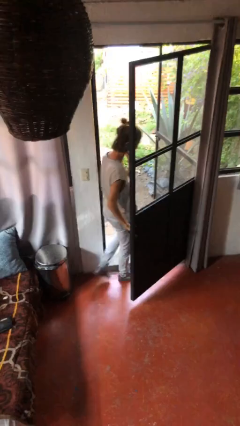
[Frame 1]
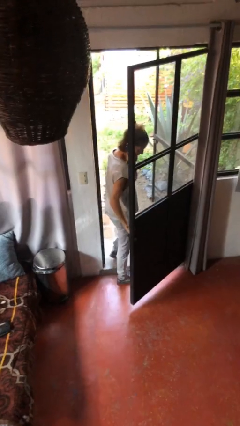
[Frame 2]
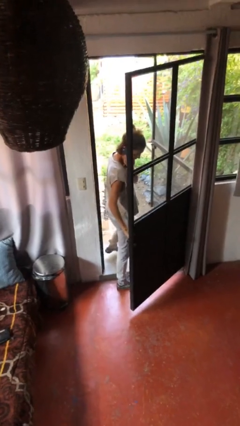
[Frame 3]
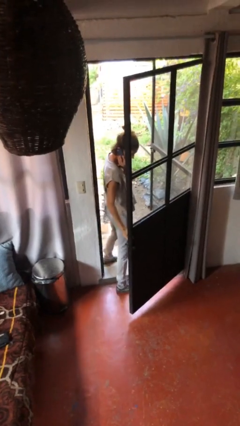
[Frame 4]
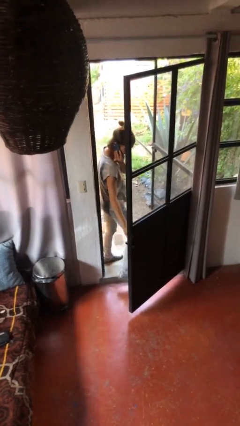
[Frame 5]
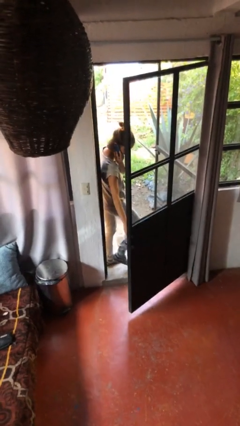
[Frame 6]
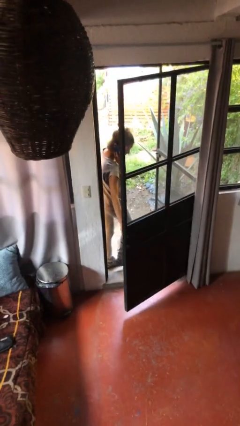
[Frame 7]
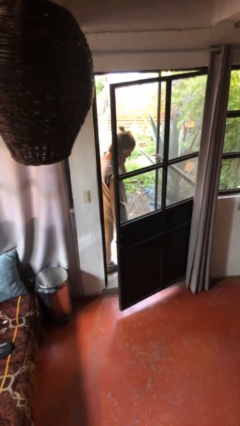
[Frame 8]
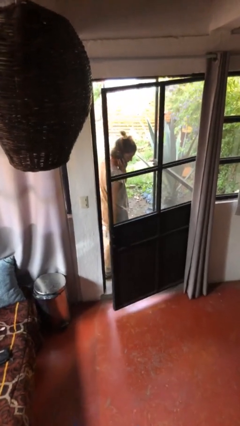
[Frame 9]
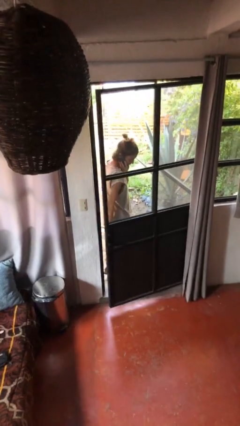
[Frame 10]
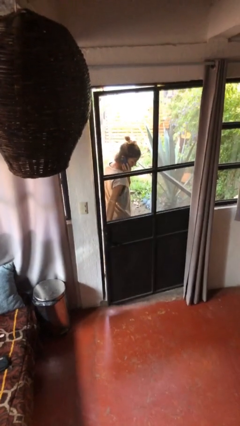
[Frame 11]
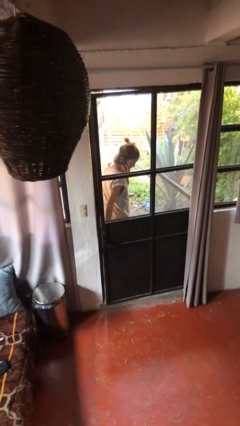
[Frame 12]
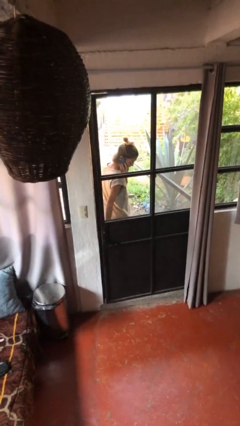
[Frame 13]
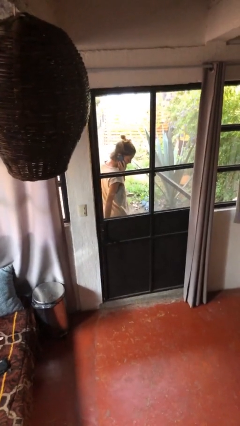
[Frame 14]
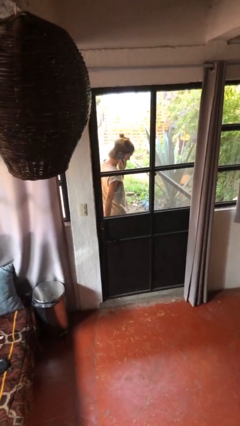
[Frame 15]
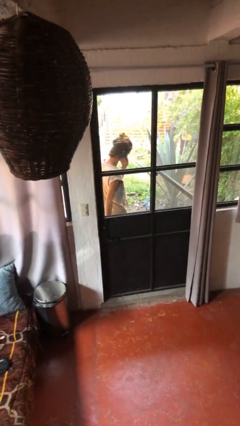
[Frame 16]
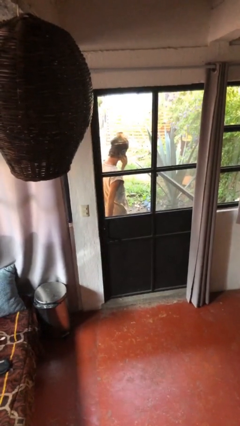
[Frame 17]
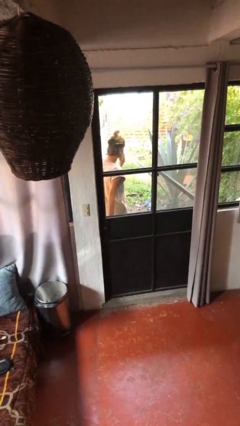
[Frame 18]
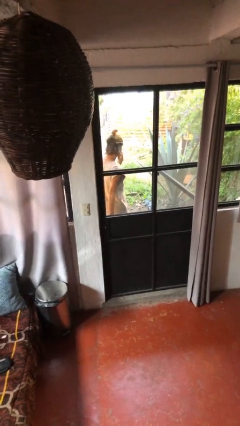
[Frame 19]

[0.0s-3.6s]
person closes facility door

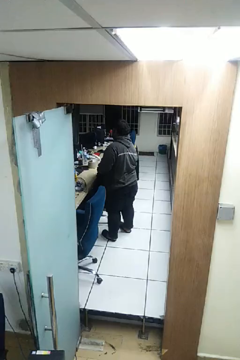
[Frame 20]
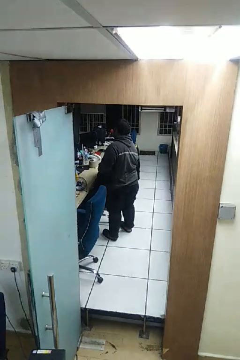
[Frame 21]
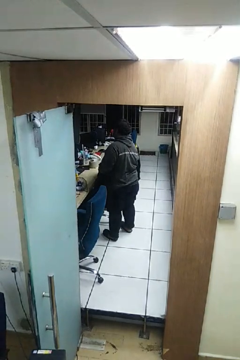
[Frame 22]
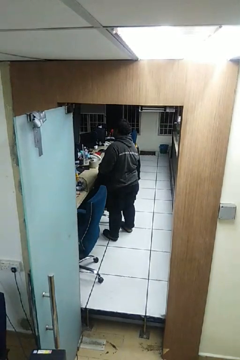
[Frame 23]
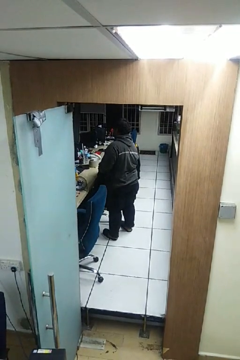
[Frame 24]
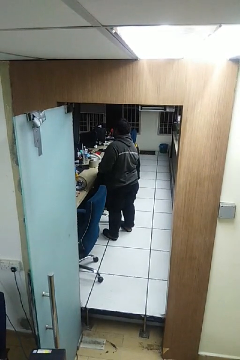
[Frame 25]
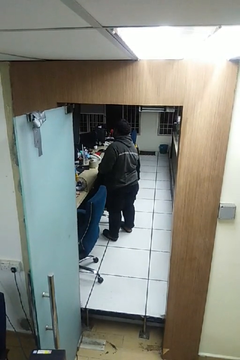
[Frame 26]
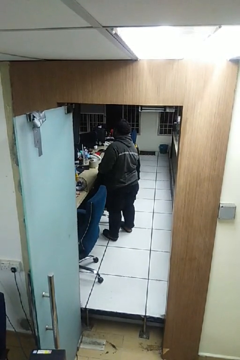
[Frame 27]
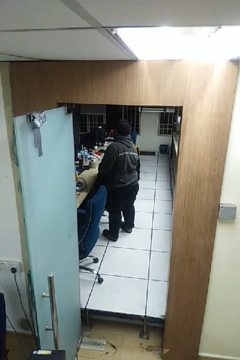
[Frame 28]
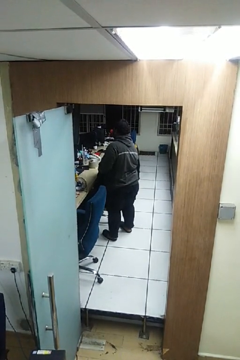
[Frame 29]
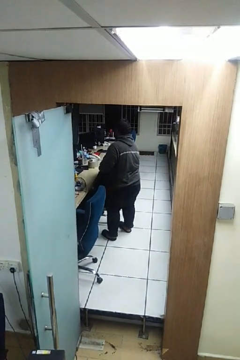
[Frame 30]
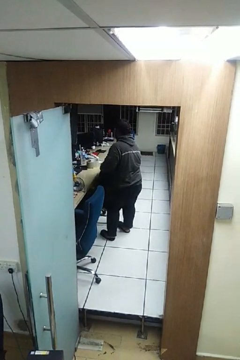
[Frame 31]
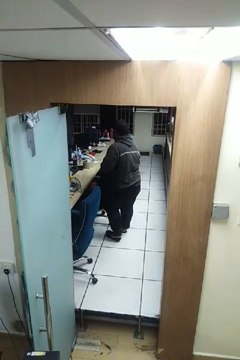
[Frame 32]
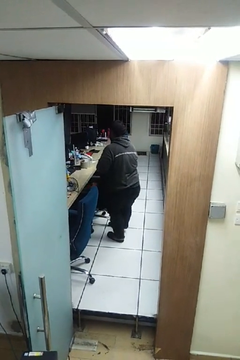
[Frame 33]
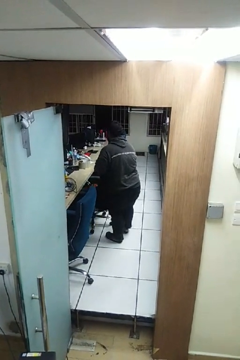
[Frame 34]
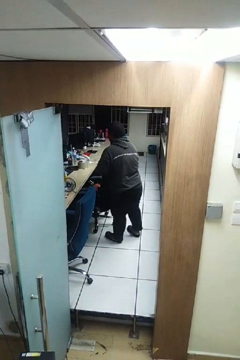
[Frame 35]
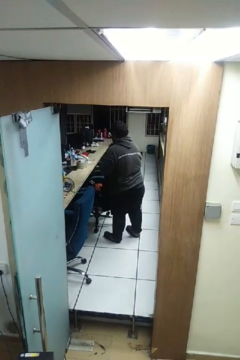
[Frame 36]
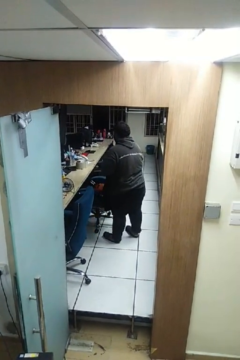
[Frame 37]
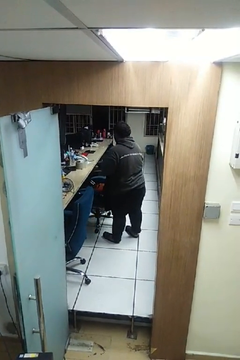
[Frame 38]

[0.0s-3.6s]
person pulls out chair

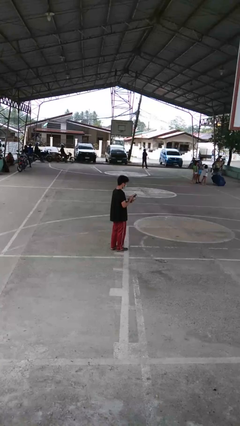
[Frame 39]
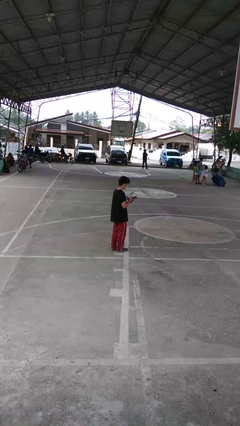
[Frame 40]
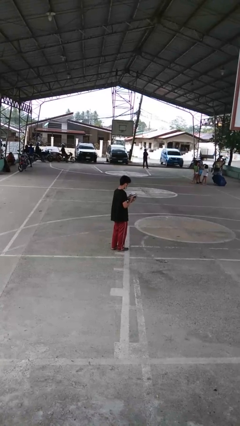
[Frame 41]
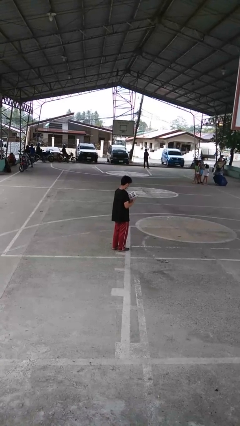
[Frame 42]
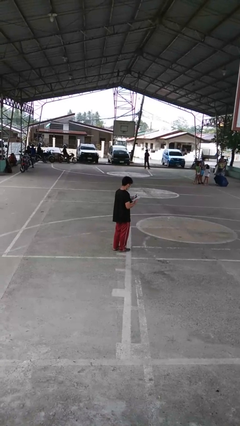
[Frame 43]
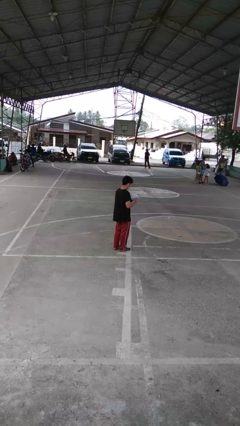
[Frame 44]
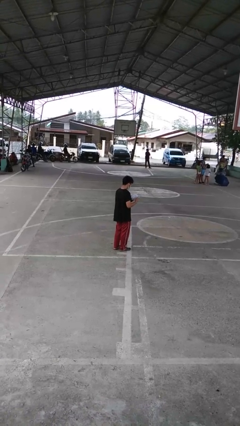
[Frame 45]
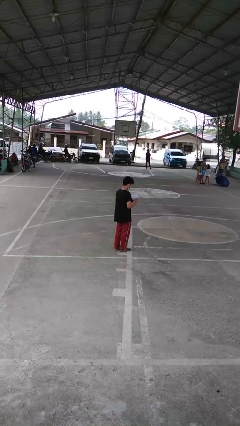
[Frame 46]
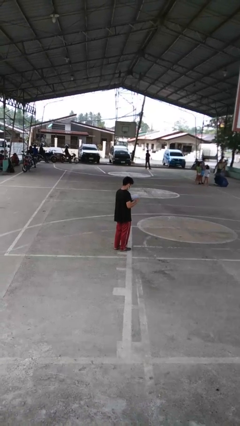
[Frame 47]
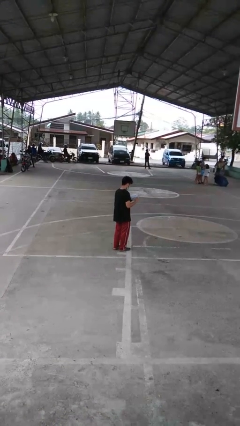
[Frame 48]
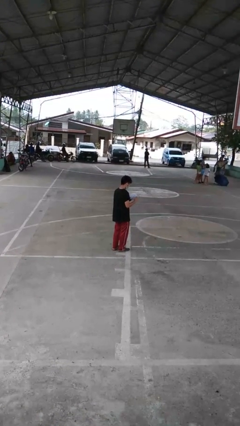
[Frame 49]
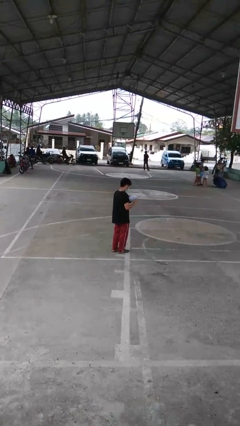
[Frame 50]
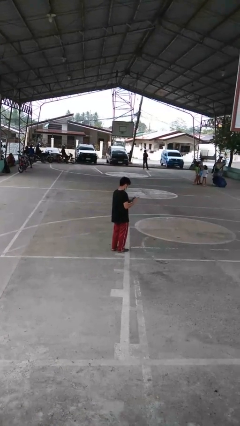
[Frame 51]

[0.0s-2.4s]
person reads magazine

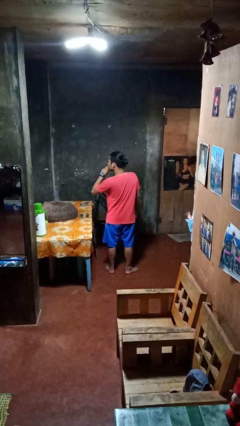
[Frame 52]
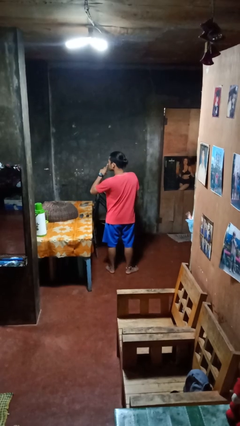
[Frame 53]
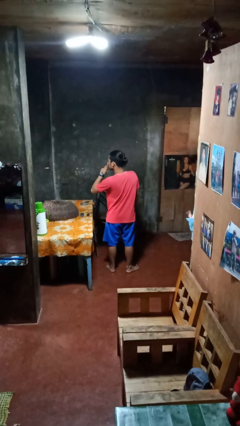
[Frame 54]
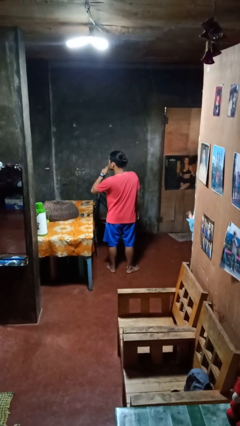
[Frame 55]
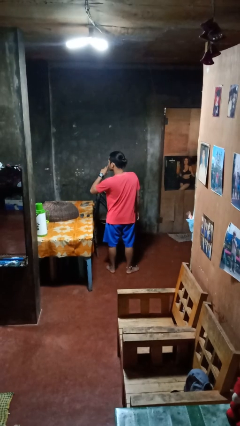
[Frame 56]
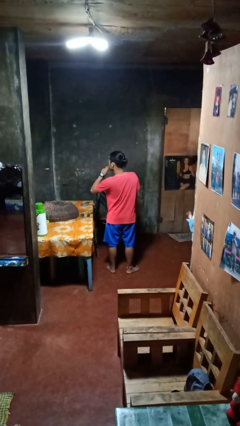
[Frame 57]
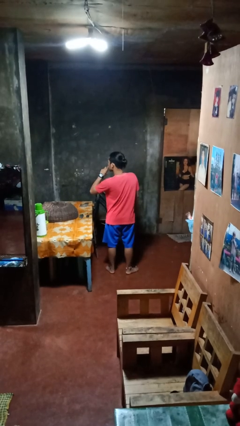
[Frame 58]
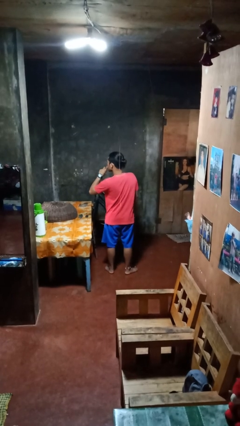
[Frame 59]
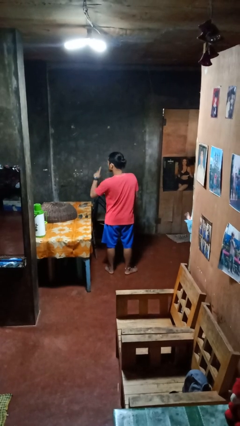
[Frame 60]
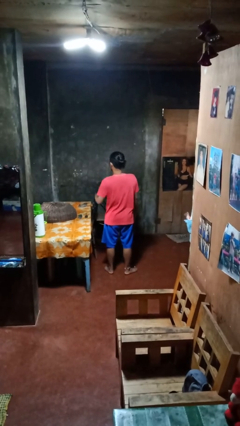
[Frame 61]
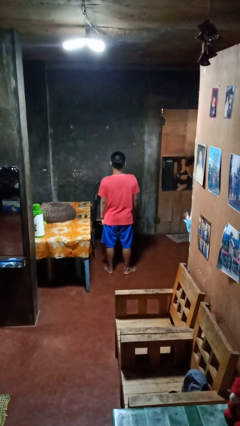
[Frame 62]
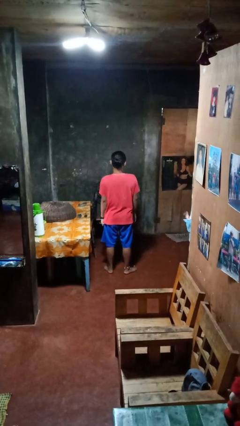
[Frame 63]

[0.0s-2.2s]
person gestures be quiet

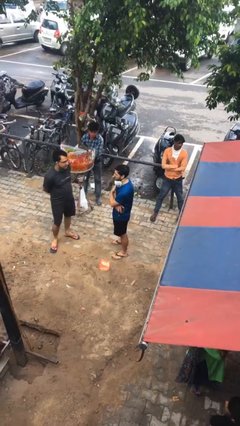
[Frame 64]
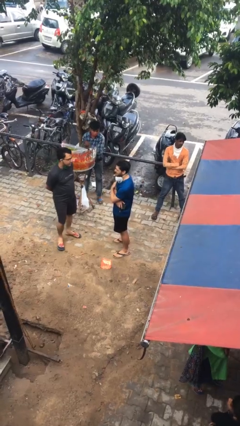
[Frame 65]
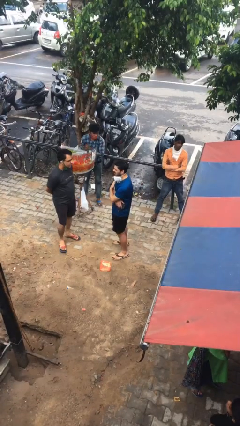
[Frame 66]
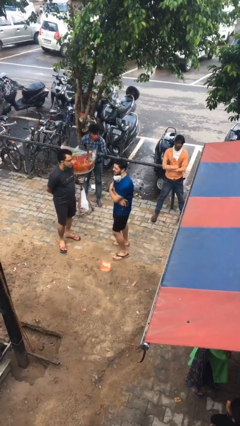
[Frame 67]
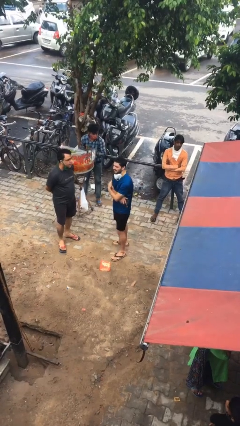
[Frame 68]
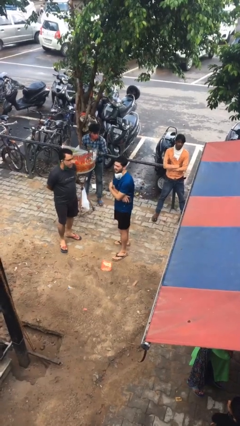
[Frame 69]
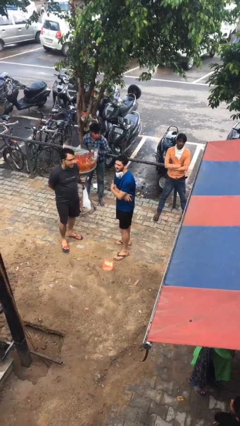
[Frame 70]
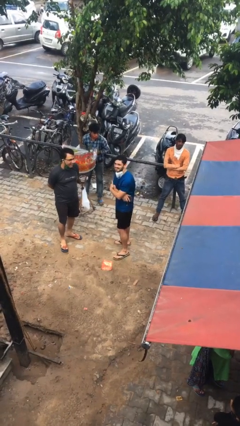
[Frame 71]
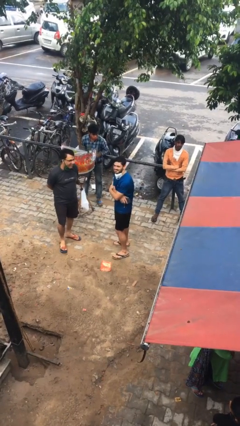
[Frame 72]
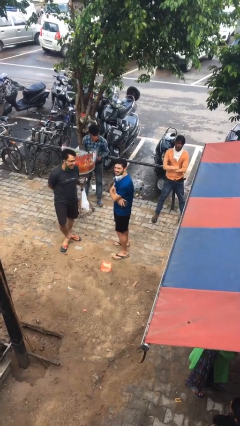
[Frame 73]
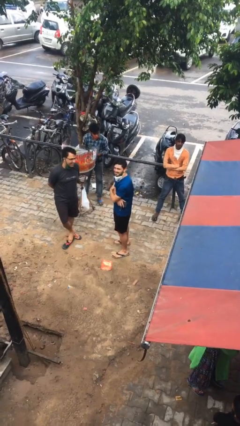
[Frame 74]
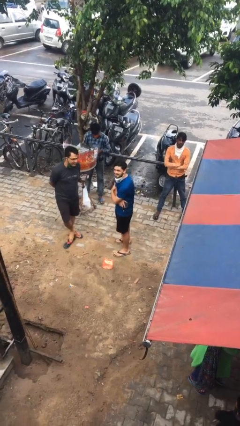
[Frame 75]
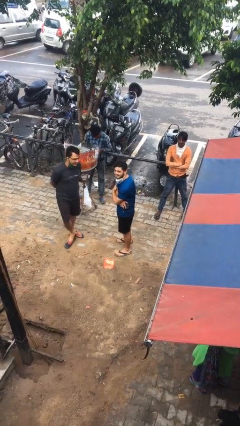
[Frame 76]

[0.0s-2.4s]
person laughs with person

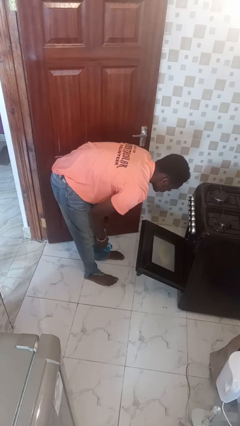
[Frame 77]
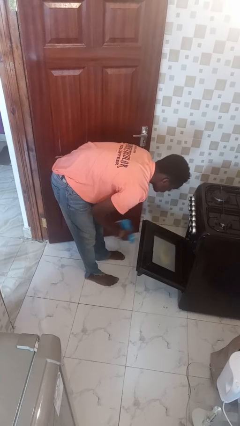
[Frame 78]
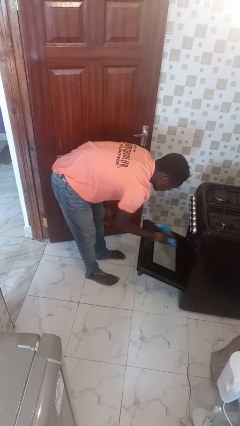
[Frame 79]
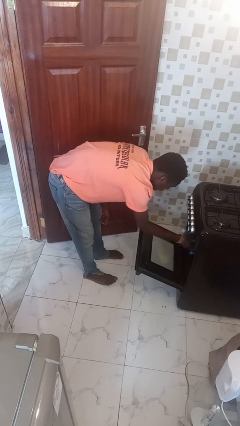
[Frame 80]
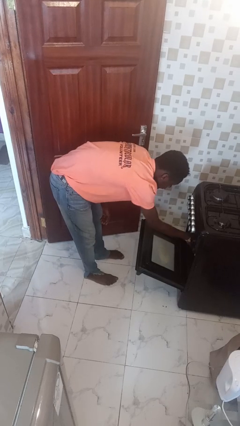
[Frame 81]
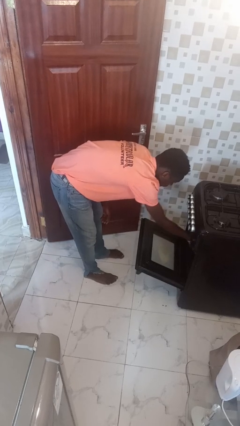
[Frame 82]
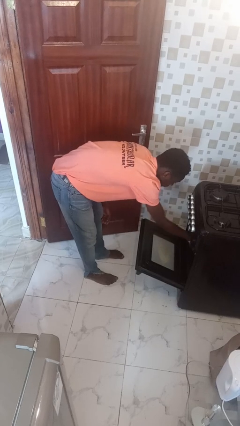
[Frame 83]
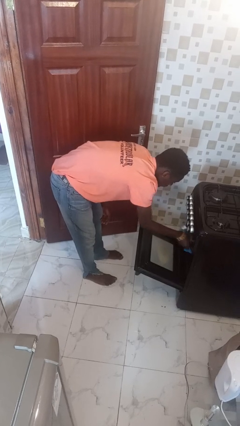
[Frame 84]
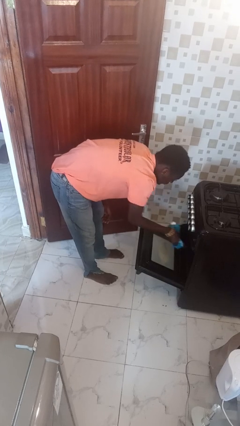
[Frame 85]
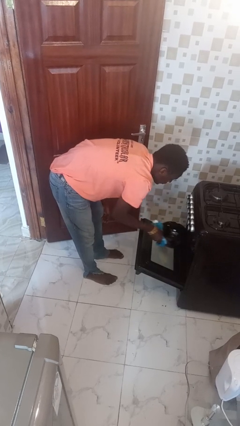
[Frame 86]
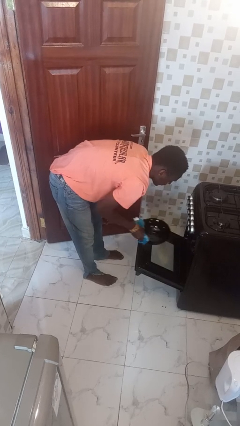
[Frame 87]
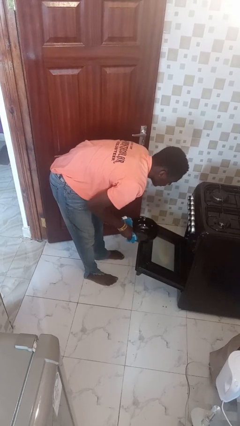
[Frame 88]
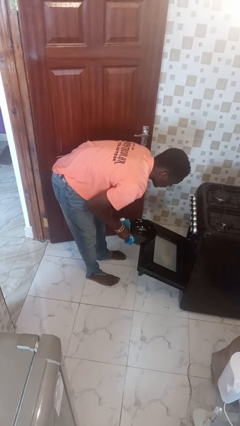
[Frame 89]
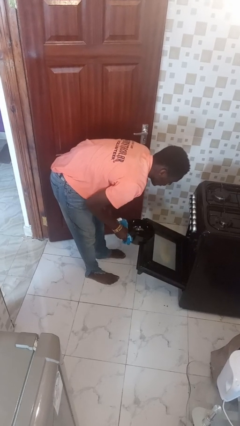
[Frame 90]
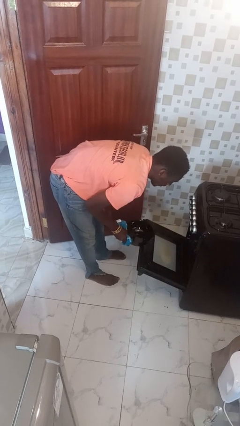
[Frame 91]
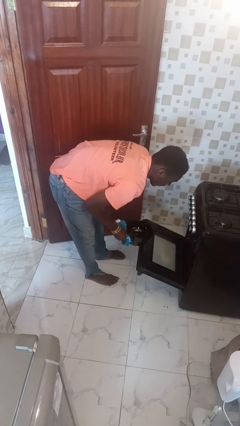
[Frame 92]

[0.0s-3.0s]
person takes object from oven

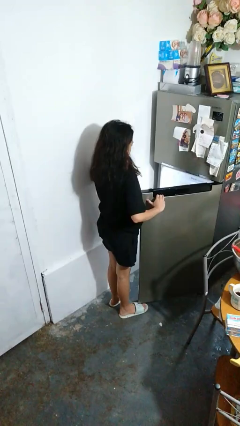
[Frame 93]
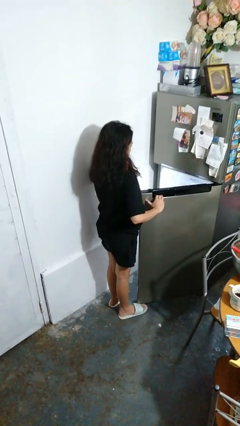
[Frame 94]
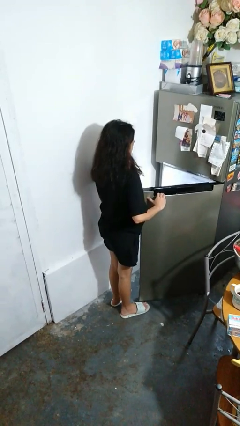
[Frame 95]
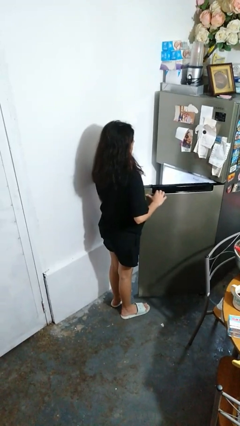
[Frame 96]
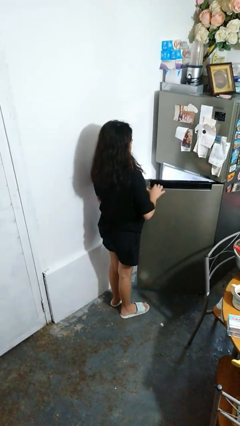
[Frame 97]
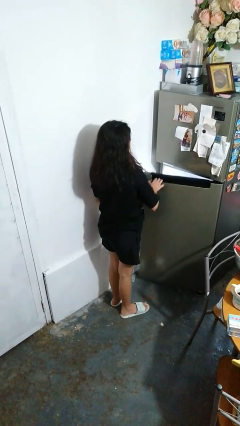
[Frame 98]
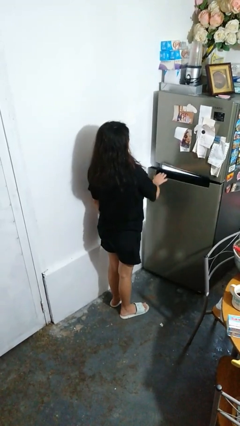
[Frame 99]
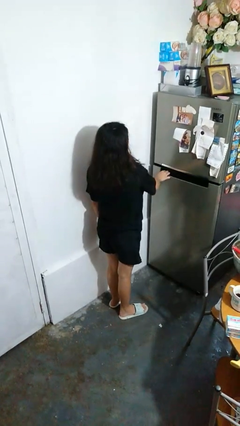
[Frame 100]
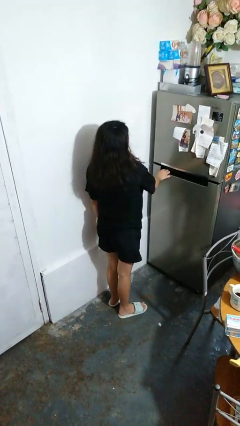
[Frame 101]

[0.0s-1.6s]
person closes refrigerator
